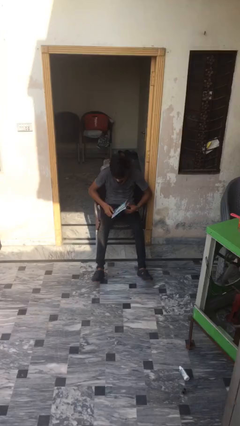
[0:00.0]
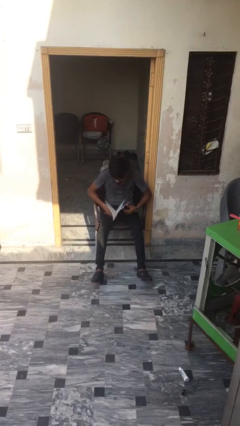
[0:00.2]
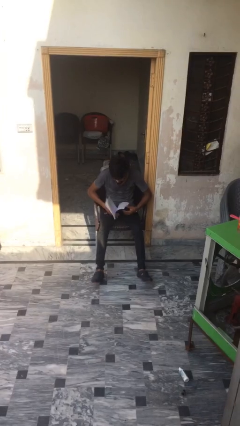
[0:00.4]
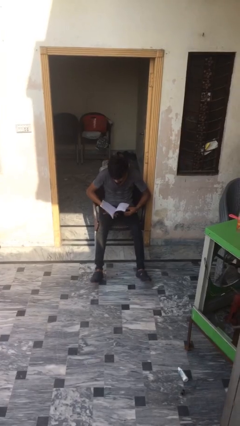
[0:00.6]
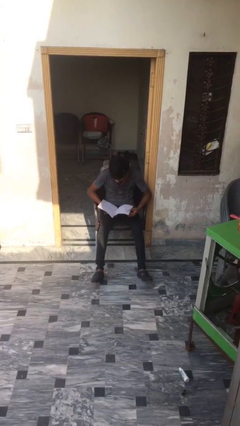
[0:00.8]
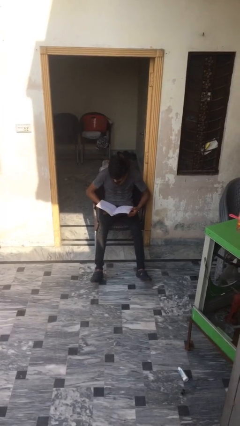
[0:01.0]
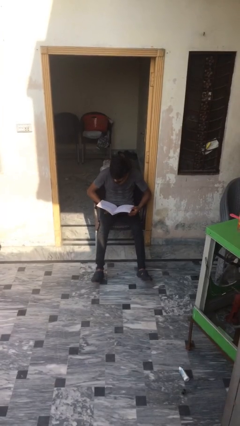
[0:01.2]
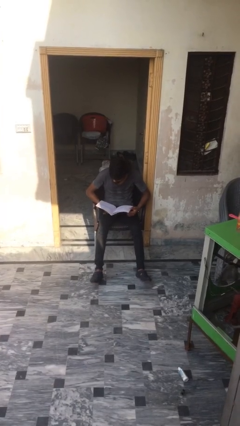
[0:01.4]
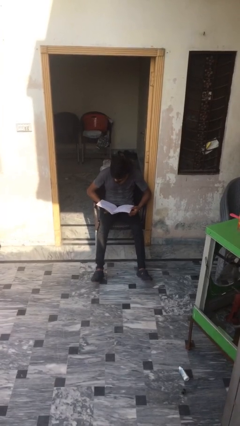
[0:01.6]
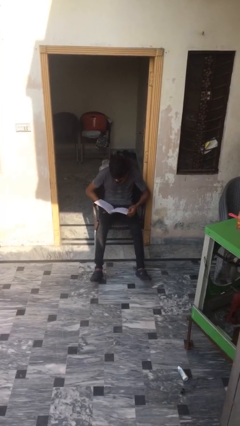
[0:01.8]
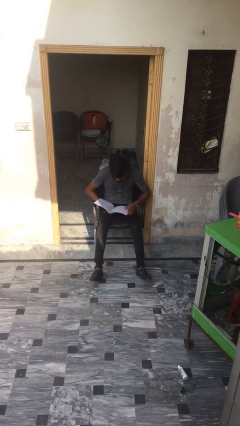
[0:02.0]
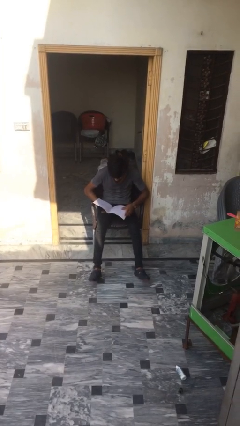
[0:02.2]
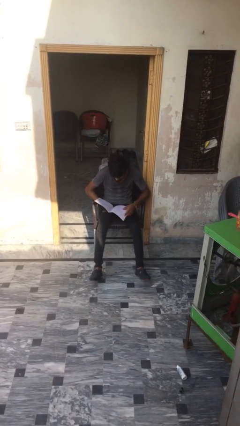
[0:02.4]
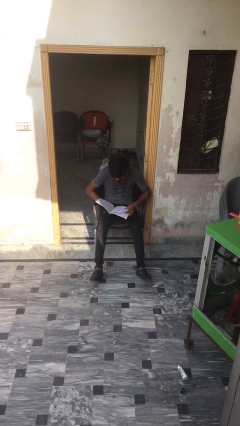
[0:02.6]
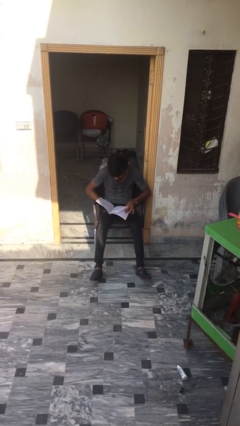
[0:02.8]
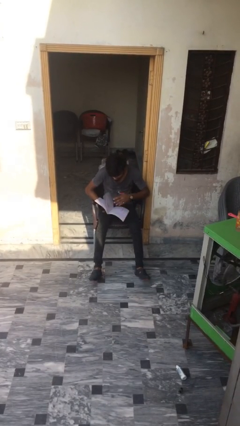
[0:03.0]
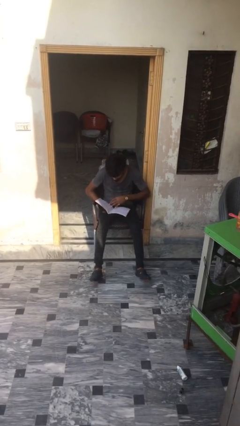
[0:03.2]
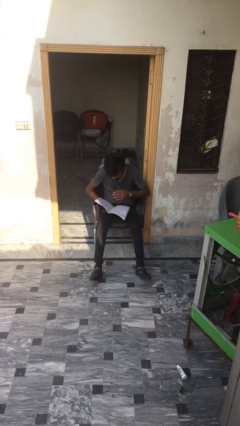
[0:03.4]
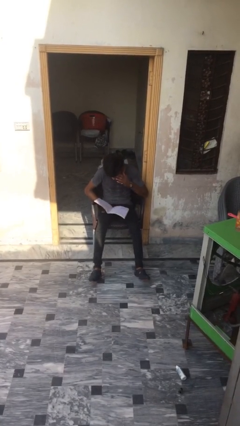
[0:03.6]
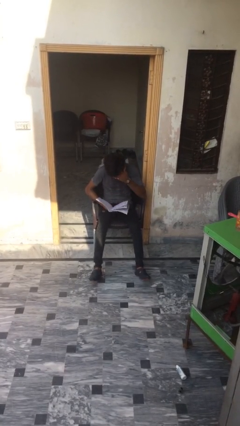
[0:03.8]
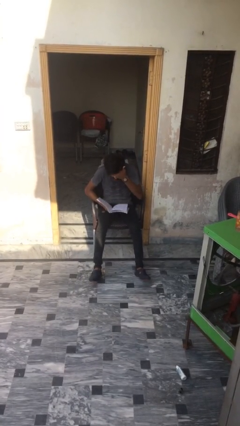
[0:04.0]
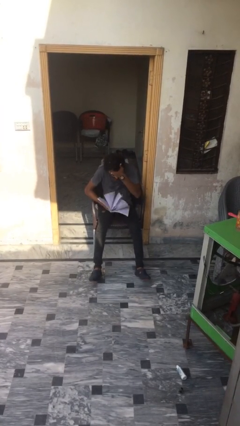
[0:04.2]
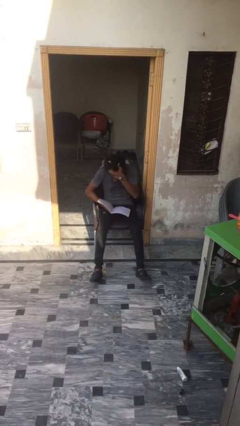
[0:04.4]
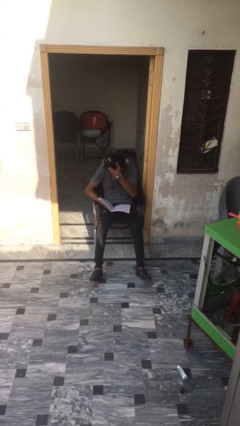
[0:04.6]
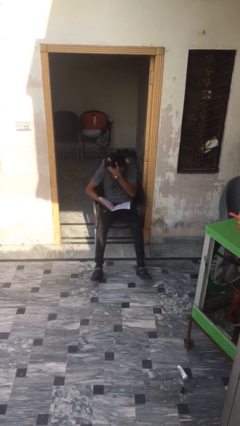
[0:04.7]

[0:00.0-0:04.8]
person reads document

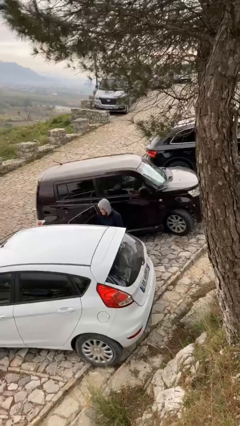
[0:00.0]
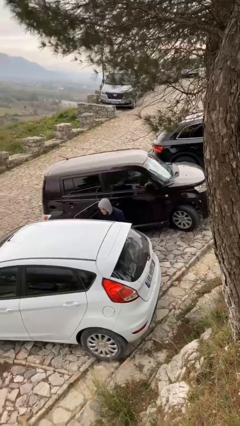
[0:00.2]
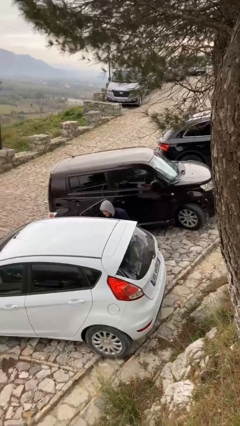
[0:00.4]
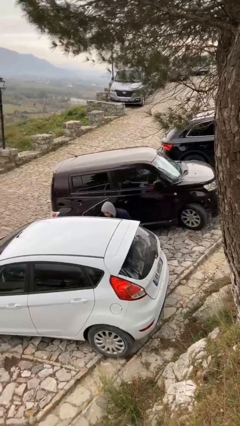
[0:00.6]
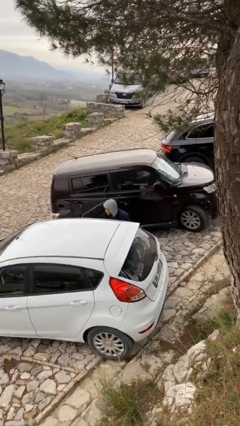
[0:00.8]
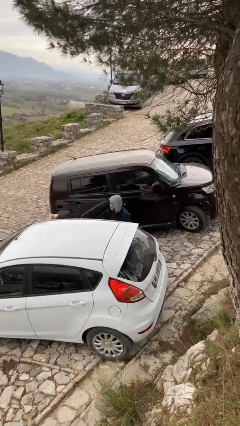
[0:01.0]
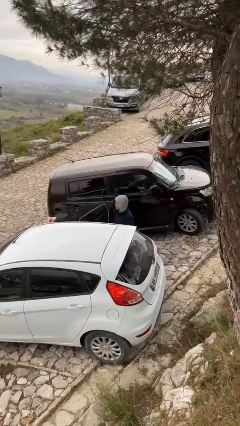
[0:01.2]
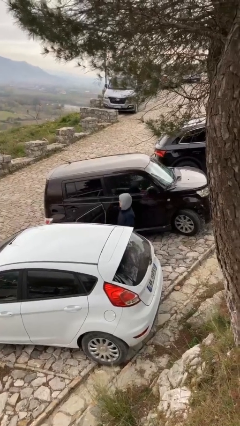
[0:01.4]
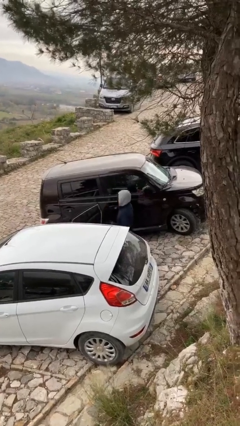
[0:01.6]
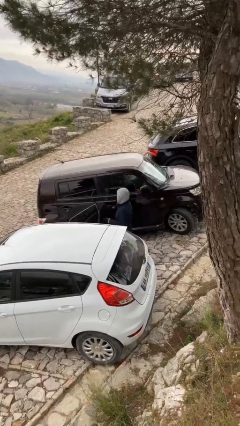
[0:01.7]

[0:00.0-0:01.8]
person loads car

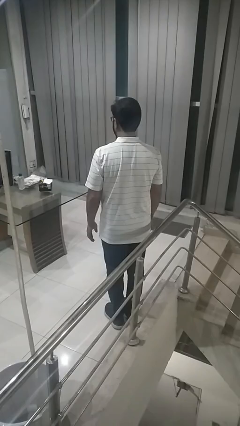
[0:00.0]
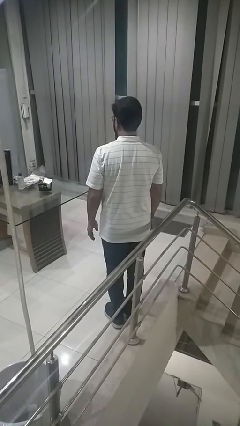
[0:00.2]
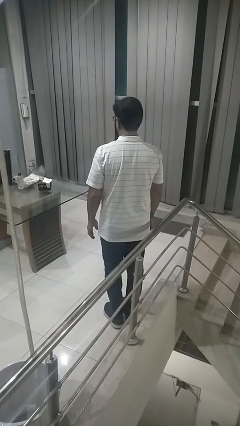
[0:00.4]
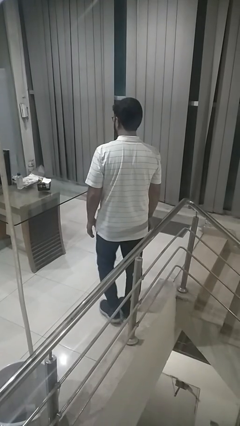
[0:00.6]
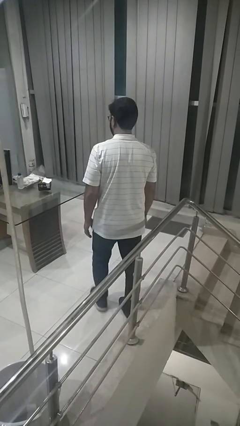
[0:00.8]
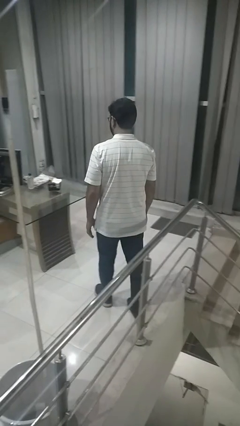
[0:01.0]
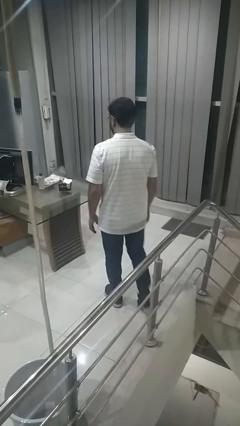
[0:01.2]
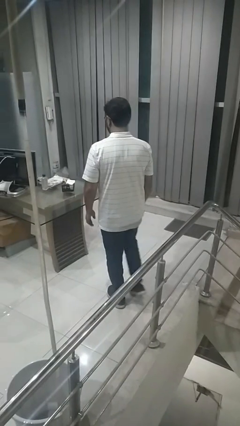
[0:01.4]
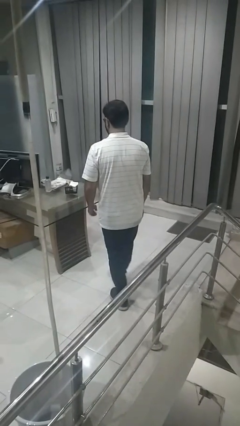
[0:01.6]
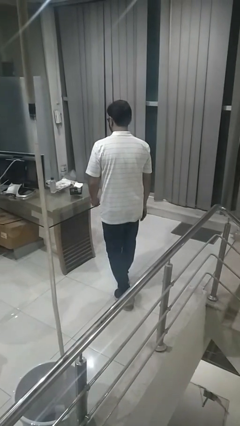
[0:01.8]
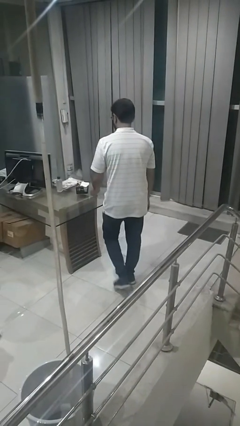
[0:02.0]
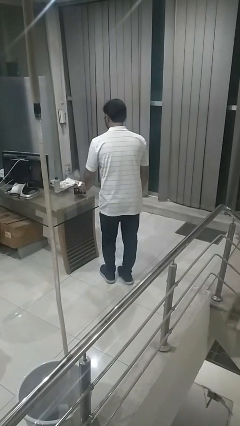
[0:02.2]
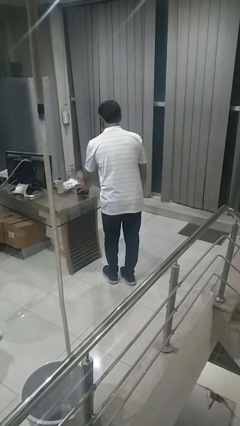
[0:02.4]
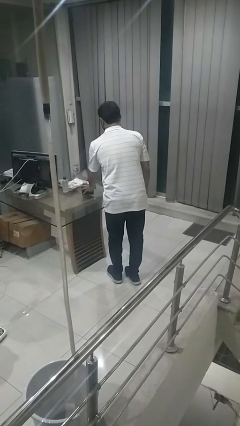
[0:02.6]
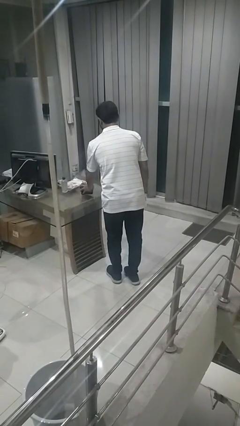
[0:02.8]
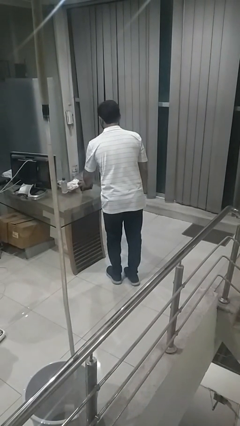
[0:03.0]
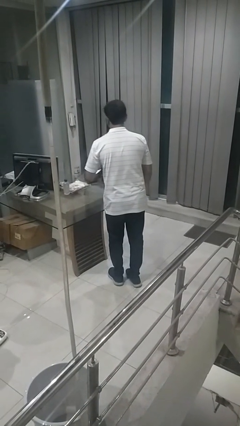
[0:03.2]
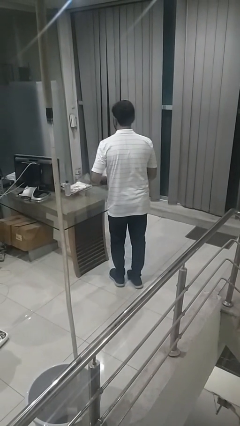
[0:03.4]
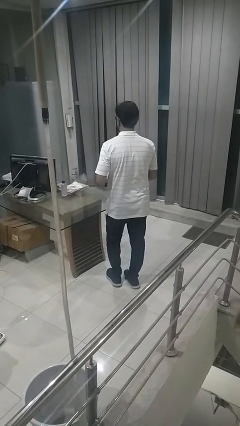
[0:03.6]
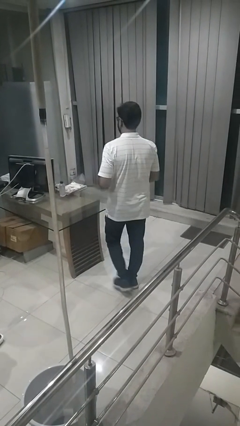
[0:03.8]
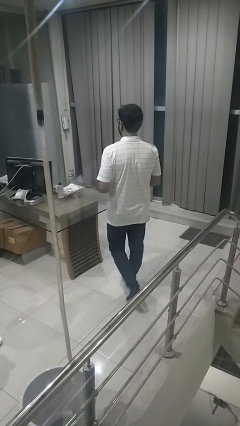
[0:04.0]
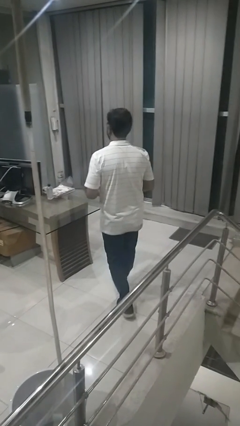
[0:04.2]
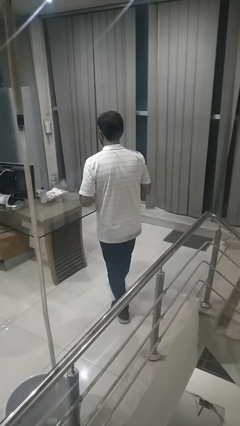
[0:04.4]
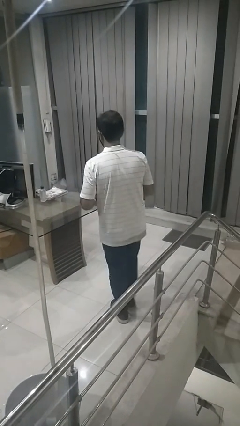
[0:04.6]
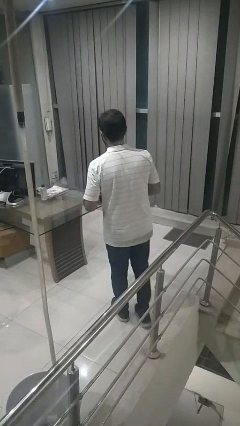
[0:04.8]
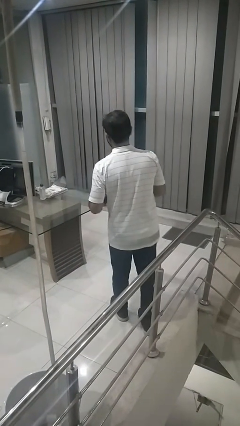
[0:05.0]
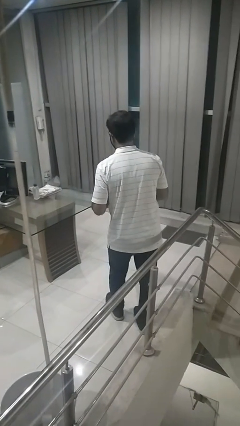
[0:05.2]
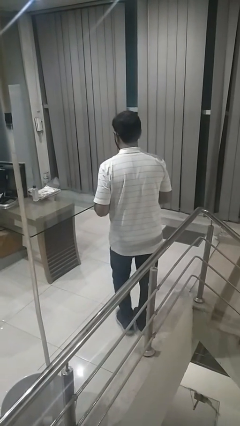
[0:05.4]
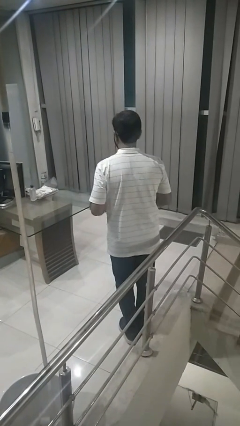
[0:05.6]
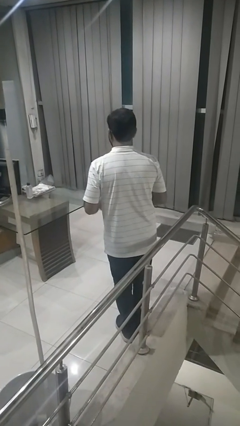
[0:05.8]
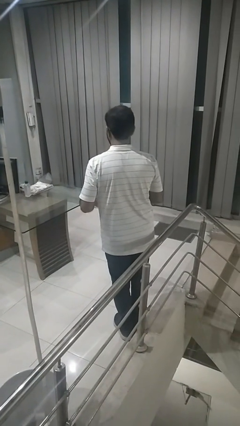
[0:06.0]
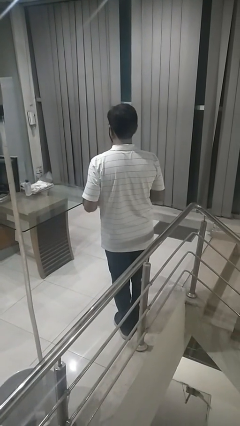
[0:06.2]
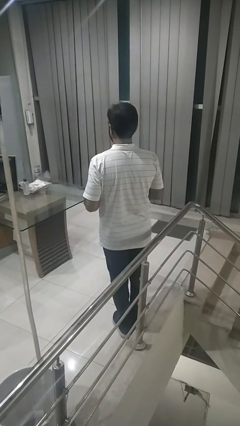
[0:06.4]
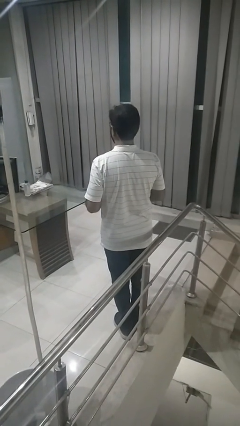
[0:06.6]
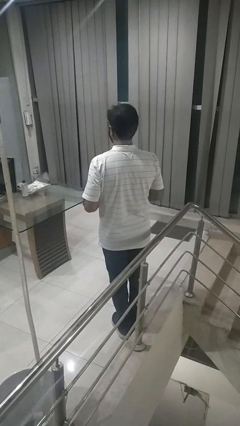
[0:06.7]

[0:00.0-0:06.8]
person picks up object from table

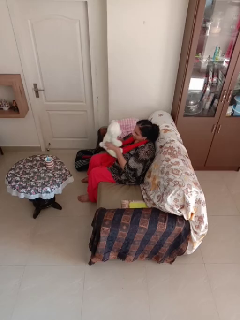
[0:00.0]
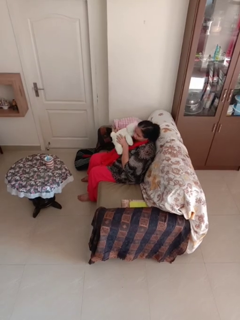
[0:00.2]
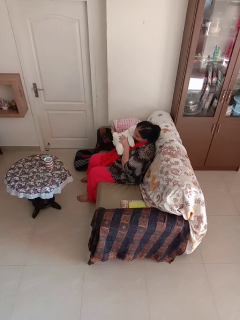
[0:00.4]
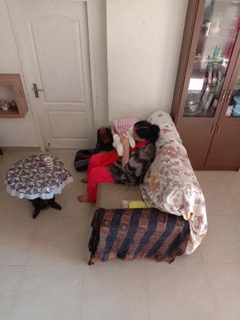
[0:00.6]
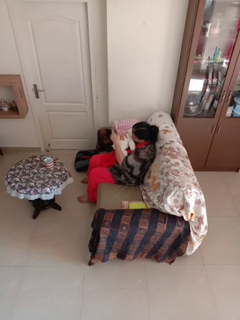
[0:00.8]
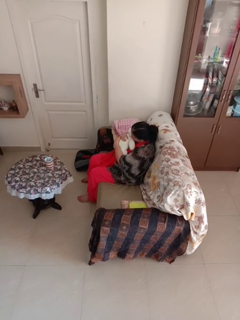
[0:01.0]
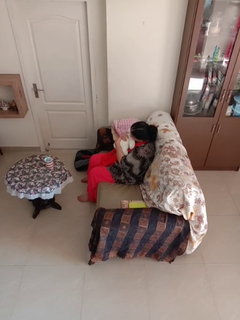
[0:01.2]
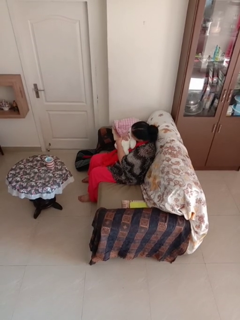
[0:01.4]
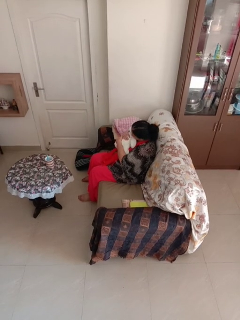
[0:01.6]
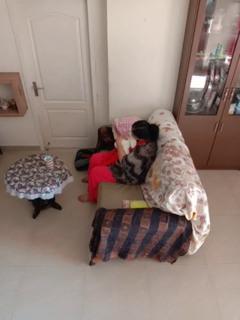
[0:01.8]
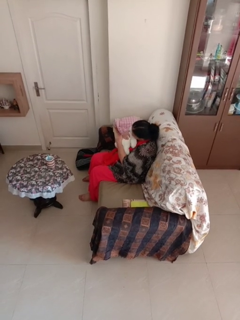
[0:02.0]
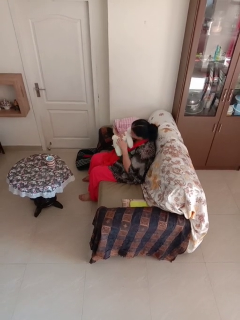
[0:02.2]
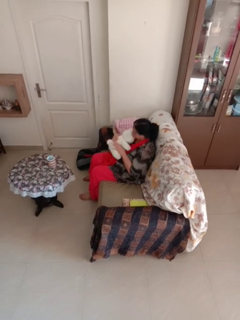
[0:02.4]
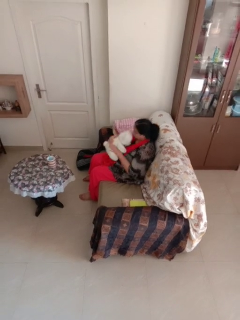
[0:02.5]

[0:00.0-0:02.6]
person hugs stuffed animal

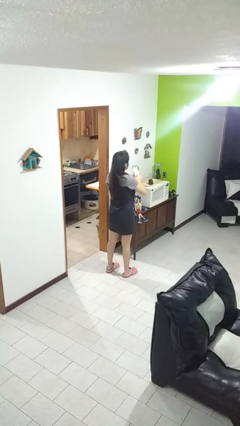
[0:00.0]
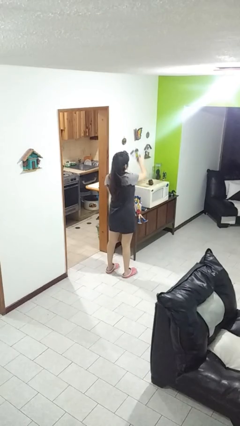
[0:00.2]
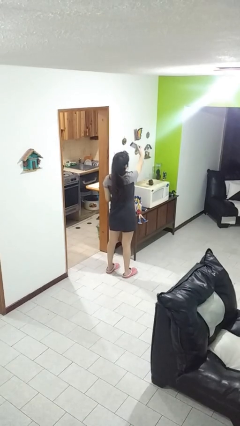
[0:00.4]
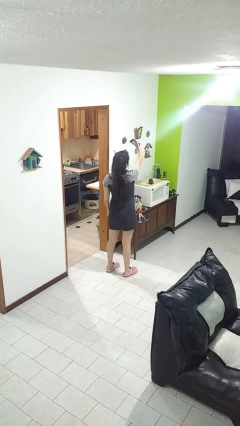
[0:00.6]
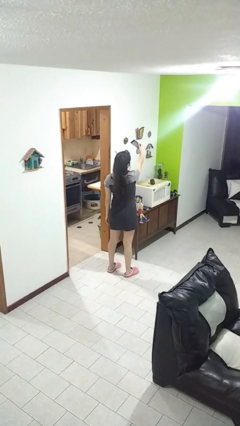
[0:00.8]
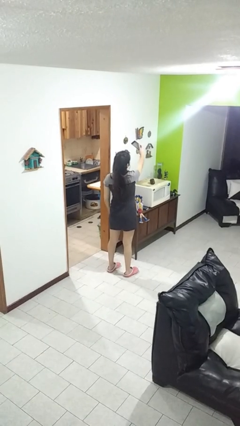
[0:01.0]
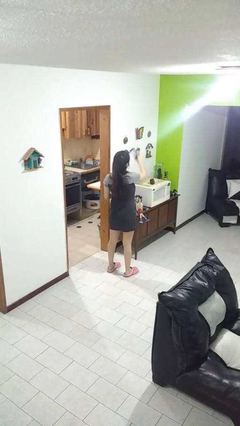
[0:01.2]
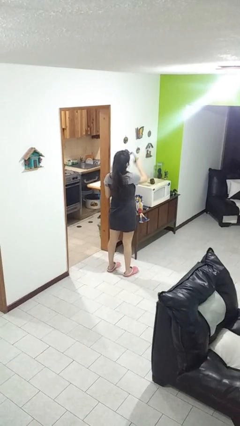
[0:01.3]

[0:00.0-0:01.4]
person takes selfie

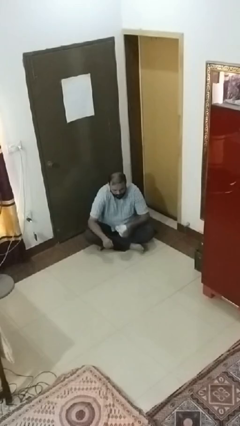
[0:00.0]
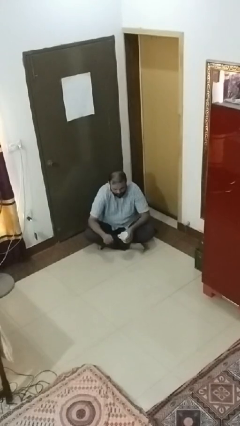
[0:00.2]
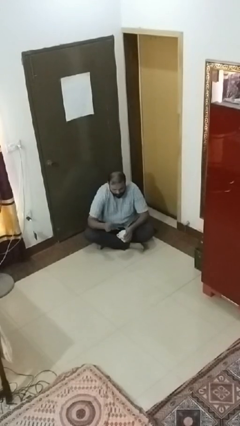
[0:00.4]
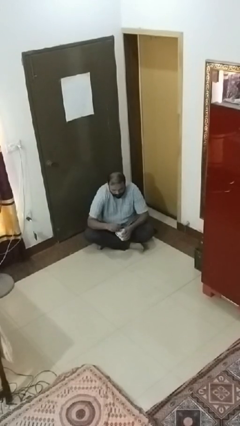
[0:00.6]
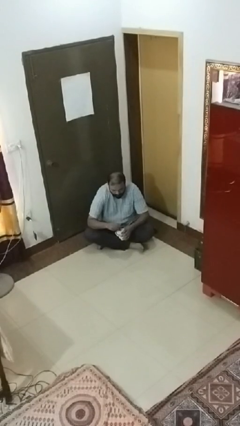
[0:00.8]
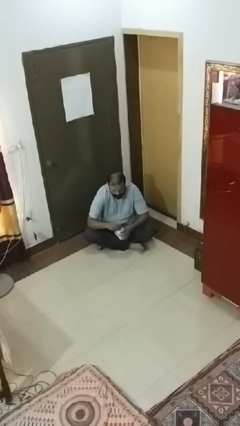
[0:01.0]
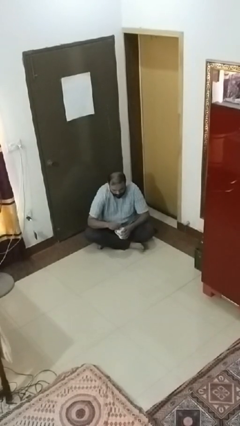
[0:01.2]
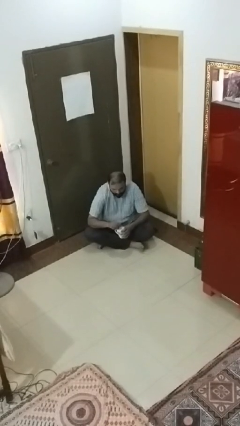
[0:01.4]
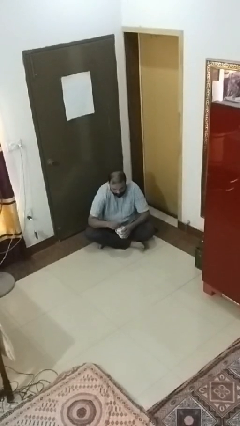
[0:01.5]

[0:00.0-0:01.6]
person stirs mug
